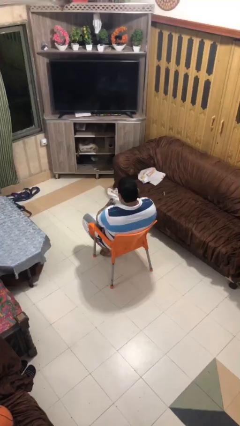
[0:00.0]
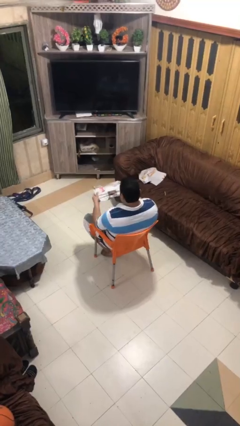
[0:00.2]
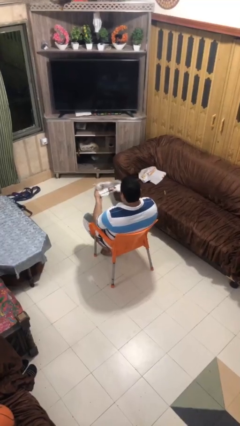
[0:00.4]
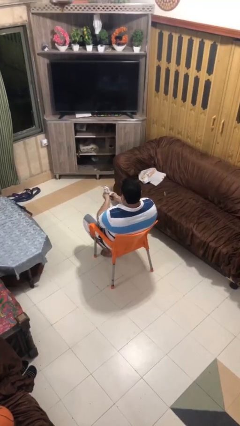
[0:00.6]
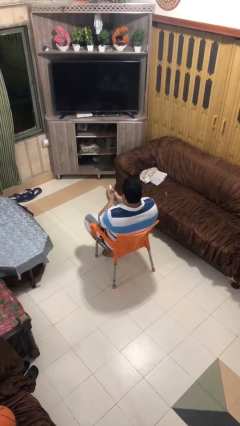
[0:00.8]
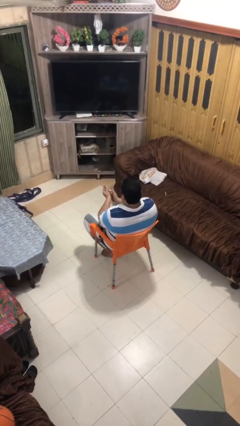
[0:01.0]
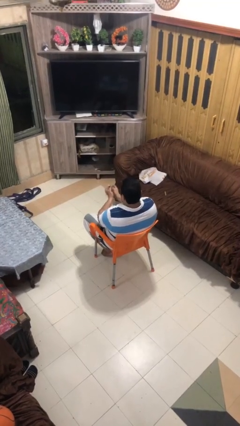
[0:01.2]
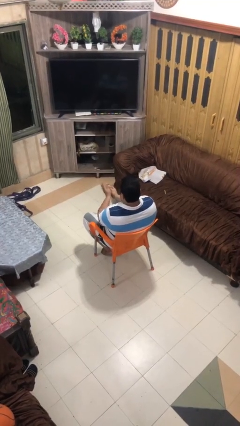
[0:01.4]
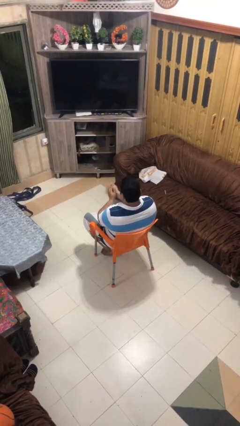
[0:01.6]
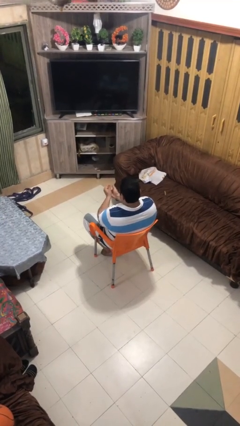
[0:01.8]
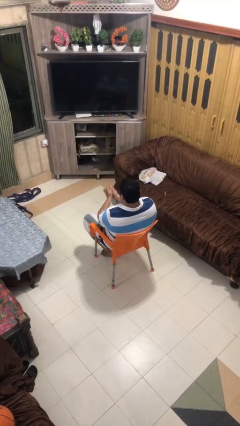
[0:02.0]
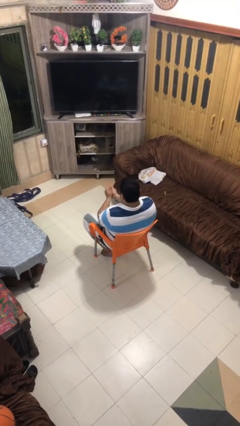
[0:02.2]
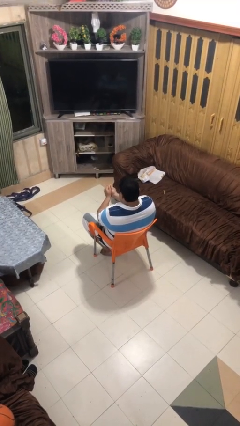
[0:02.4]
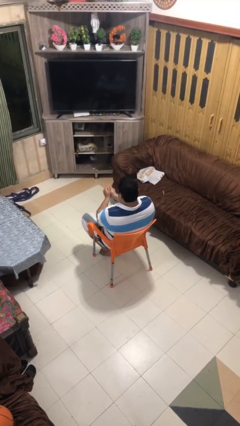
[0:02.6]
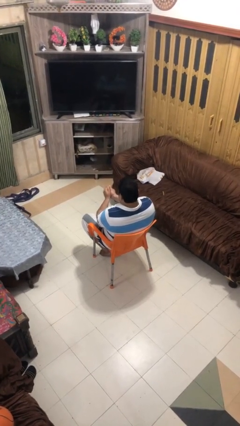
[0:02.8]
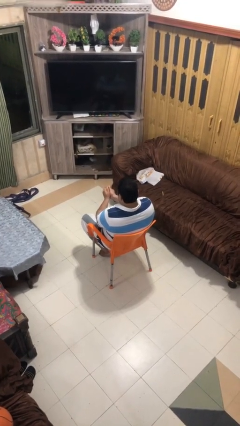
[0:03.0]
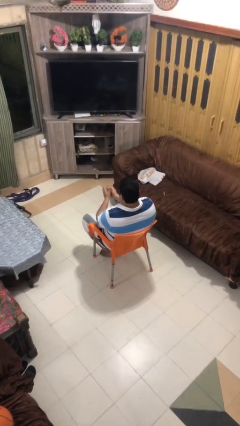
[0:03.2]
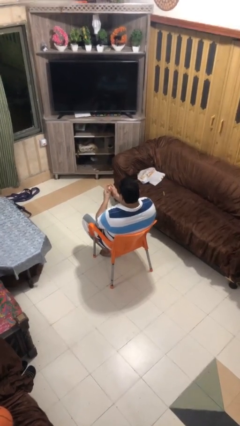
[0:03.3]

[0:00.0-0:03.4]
person crumples paper

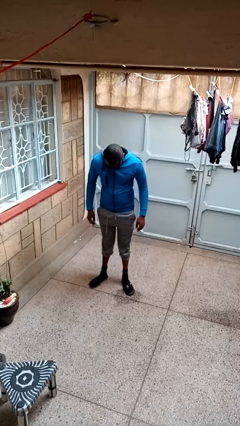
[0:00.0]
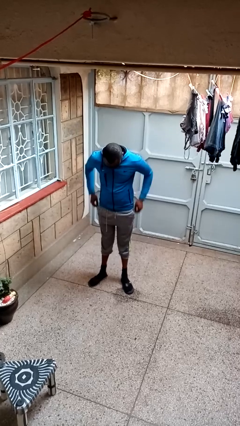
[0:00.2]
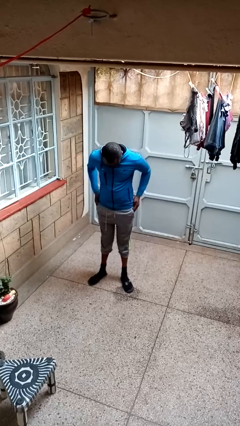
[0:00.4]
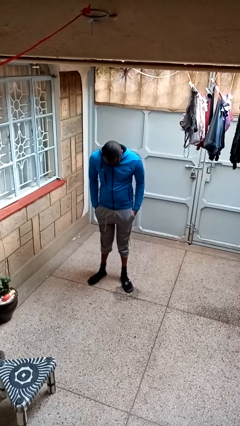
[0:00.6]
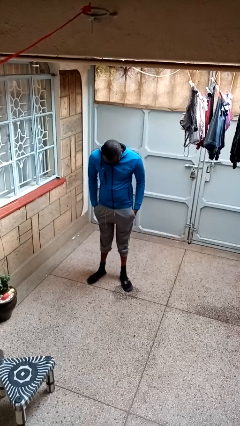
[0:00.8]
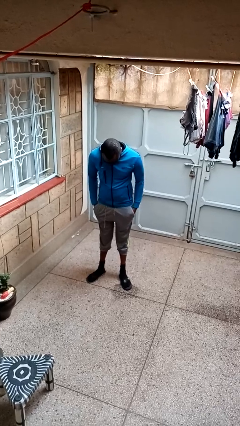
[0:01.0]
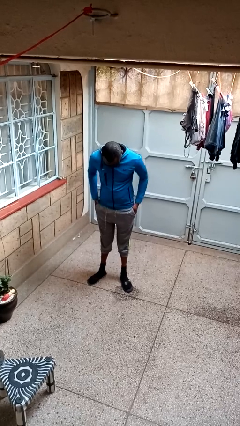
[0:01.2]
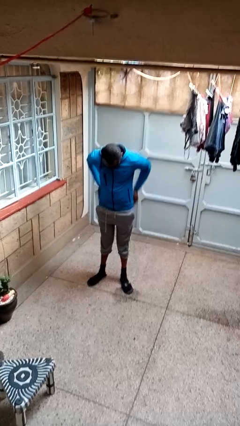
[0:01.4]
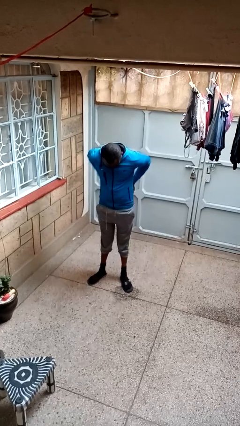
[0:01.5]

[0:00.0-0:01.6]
person puts hands in back pockets

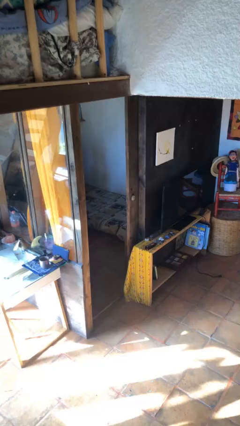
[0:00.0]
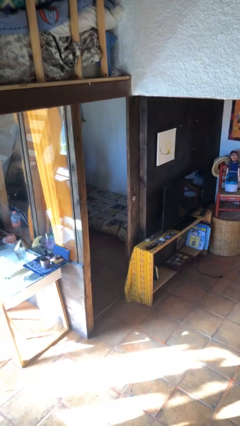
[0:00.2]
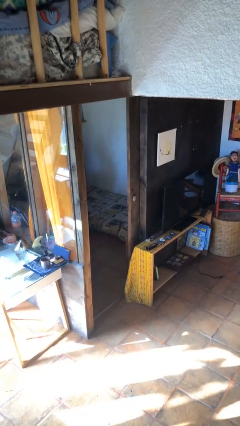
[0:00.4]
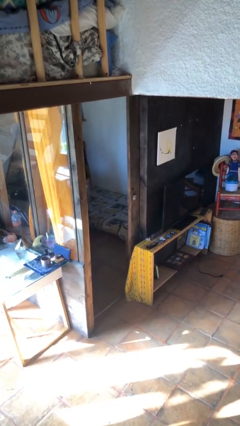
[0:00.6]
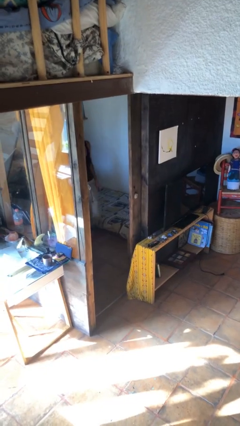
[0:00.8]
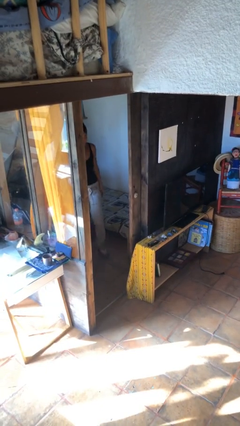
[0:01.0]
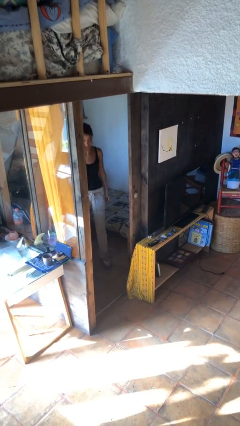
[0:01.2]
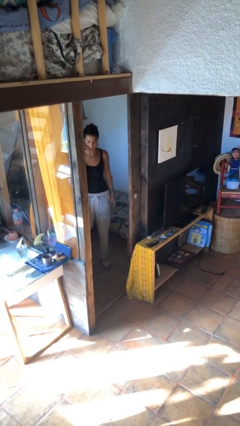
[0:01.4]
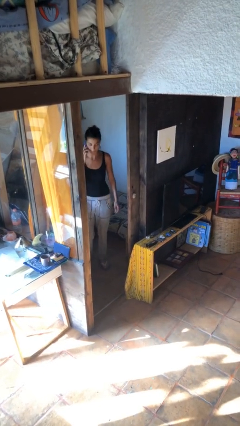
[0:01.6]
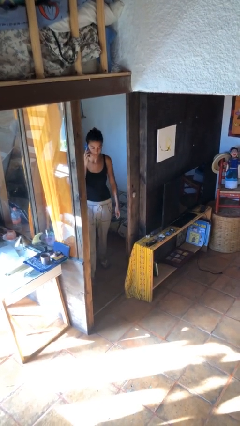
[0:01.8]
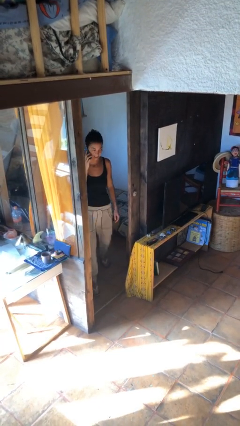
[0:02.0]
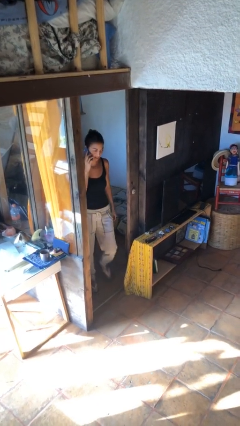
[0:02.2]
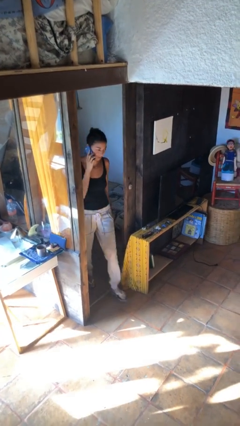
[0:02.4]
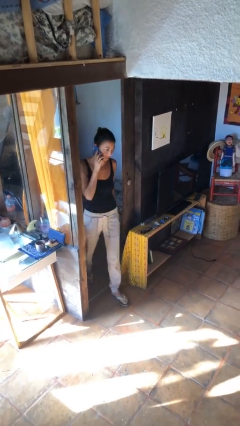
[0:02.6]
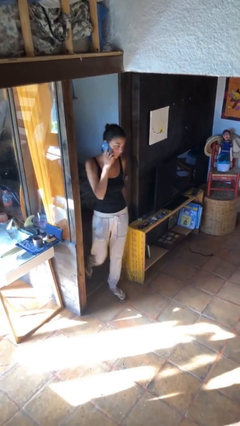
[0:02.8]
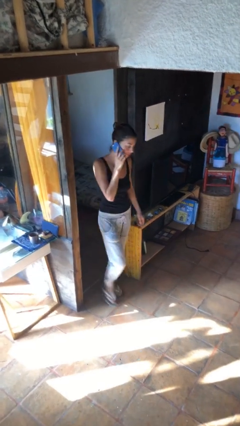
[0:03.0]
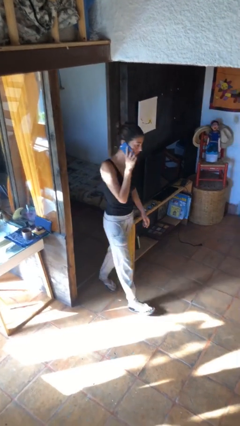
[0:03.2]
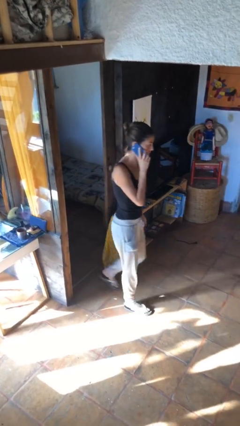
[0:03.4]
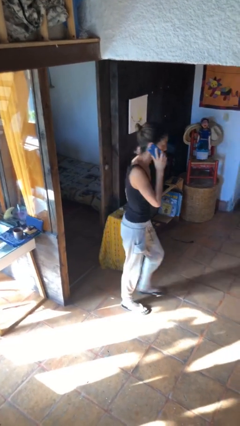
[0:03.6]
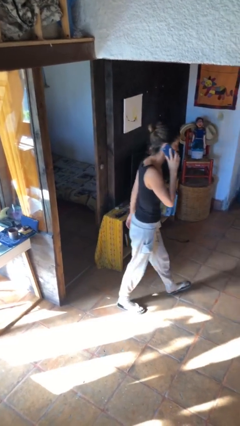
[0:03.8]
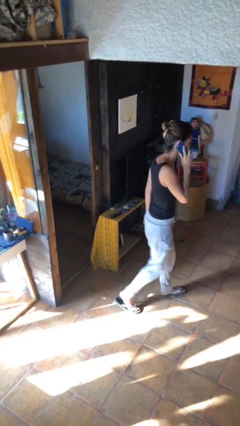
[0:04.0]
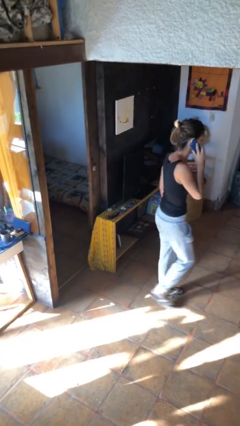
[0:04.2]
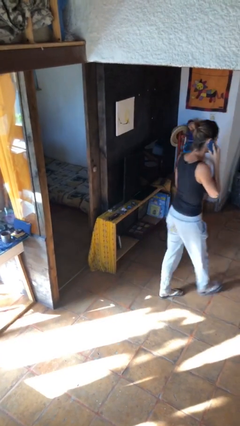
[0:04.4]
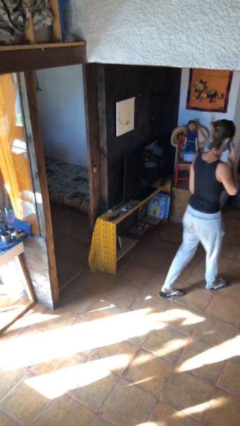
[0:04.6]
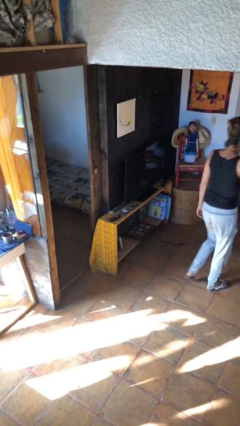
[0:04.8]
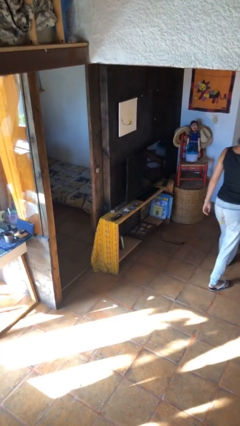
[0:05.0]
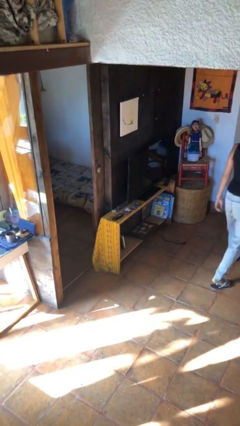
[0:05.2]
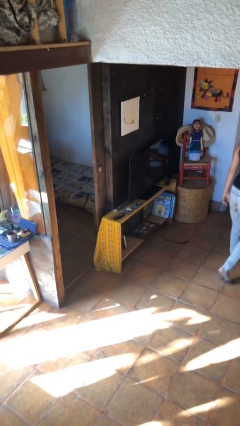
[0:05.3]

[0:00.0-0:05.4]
person enters scene through structure

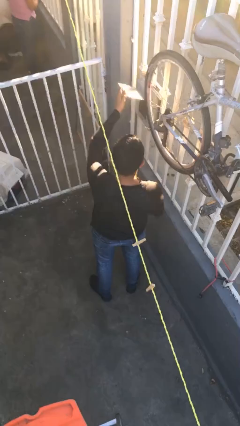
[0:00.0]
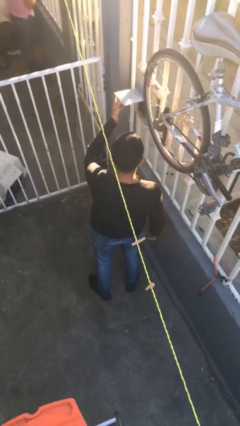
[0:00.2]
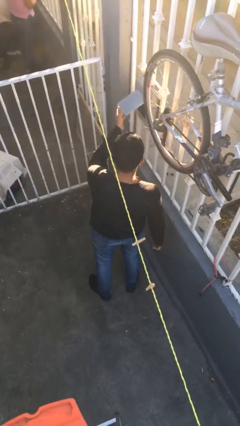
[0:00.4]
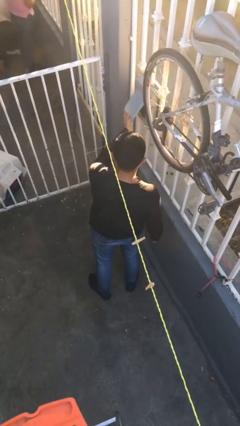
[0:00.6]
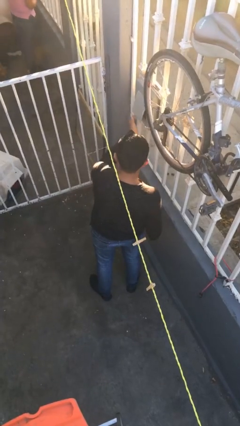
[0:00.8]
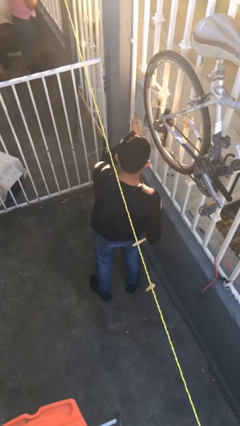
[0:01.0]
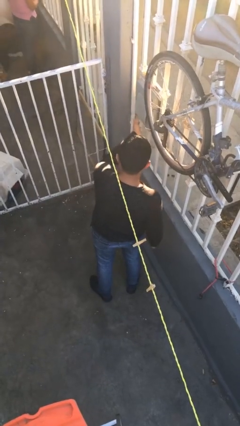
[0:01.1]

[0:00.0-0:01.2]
person closes mailbox

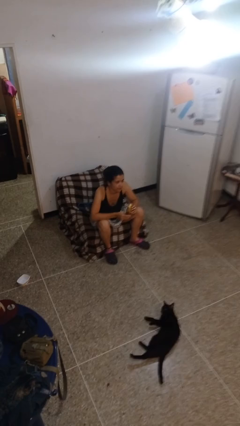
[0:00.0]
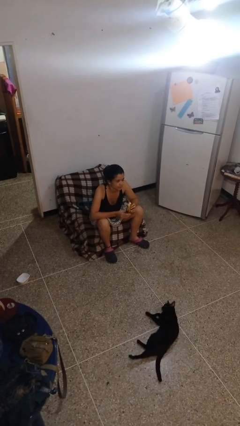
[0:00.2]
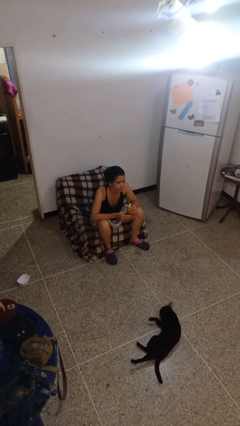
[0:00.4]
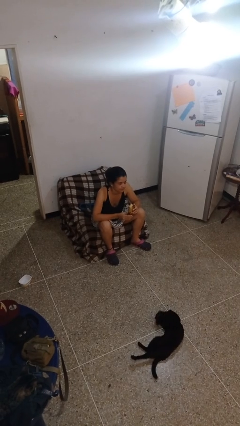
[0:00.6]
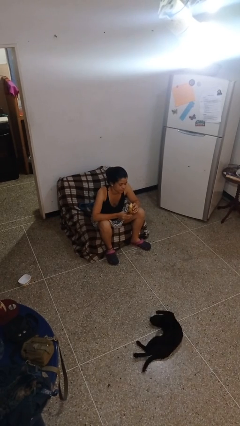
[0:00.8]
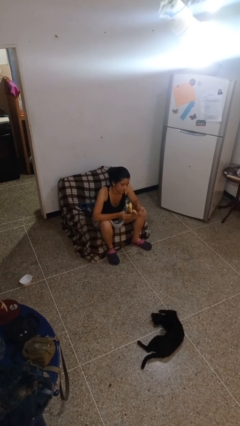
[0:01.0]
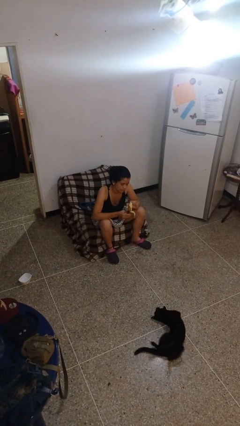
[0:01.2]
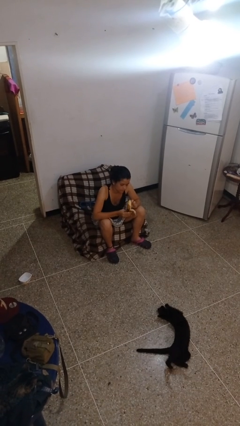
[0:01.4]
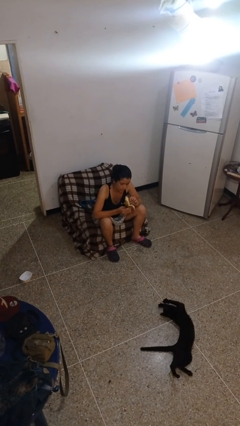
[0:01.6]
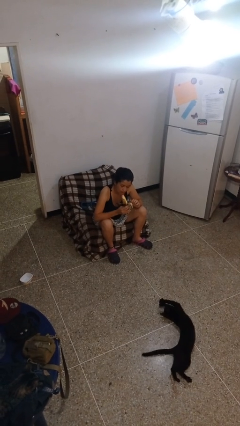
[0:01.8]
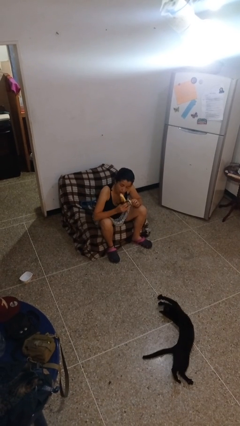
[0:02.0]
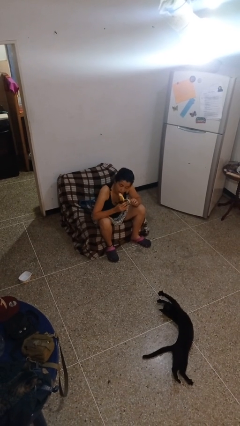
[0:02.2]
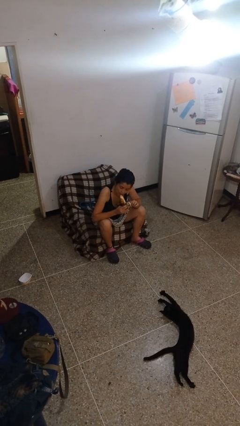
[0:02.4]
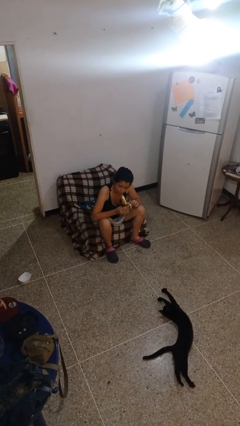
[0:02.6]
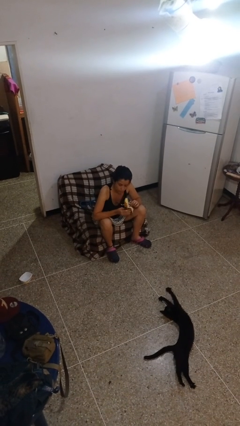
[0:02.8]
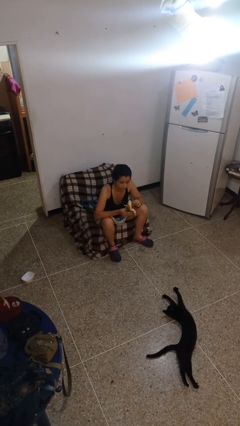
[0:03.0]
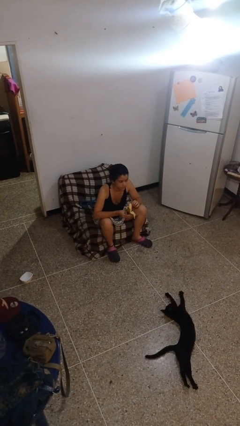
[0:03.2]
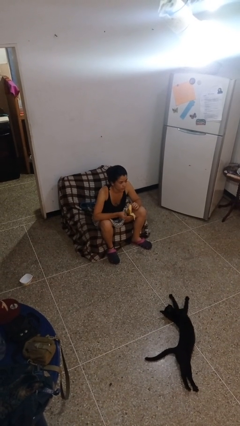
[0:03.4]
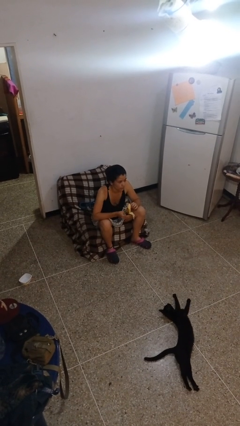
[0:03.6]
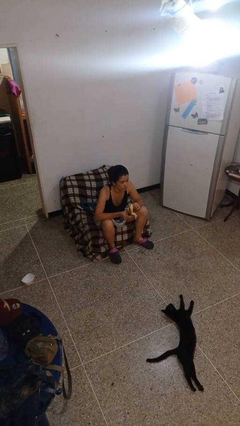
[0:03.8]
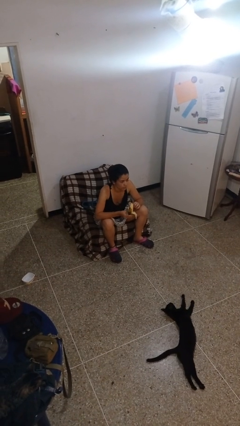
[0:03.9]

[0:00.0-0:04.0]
person eats banana

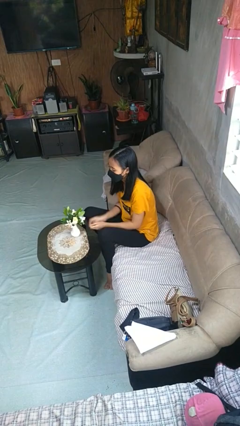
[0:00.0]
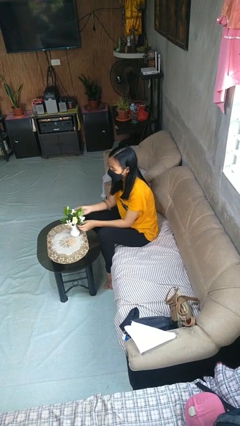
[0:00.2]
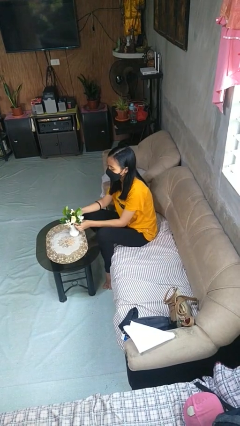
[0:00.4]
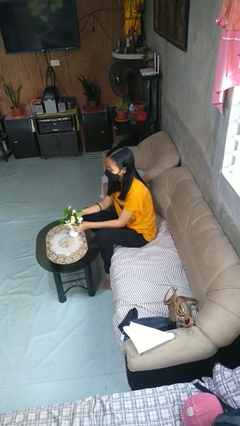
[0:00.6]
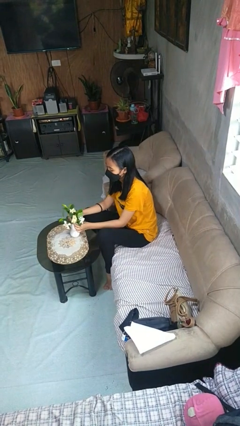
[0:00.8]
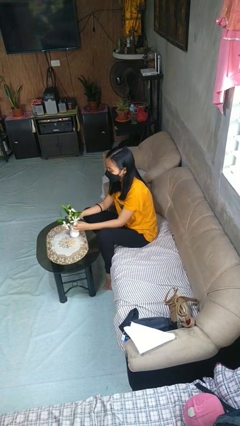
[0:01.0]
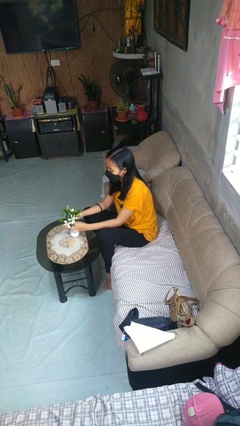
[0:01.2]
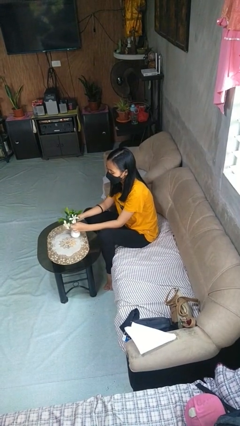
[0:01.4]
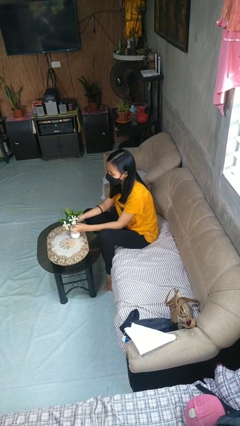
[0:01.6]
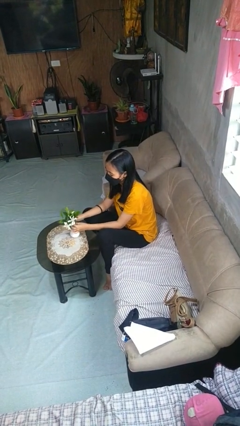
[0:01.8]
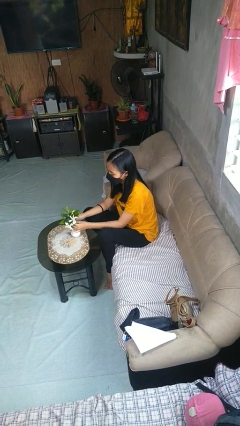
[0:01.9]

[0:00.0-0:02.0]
person arranges flowers in vase
